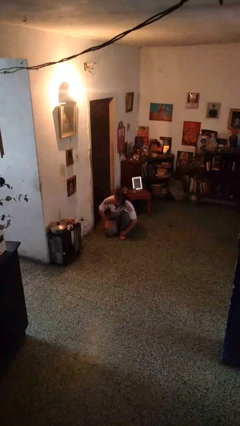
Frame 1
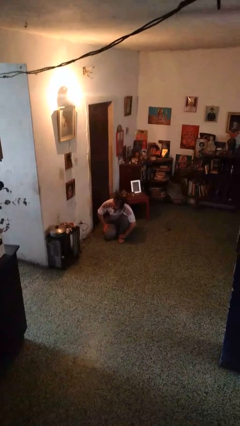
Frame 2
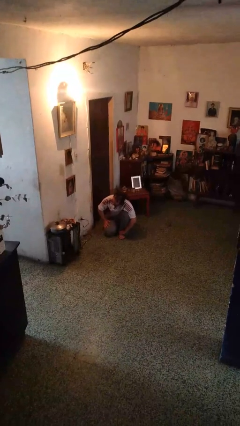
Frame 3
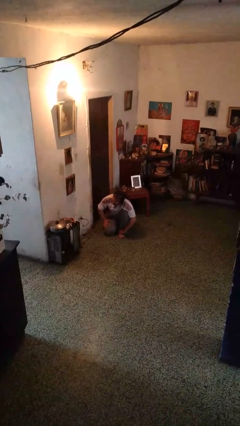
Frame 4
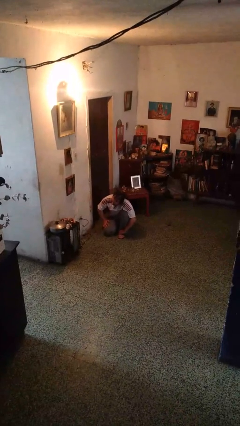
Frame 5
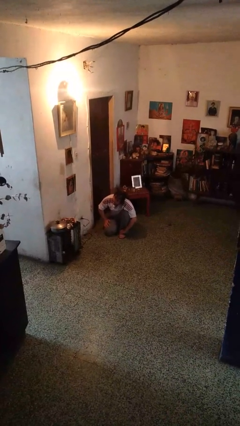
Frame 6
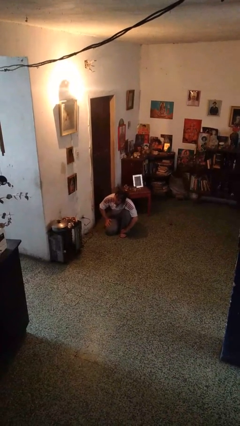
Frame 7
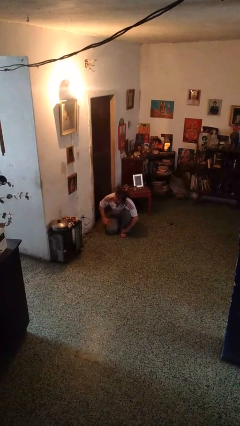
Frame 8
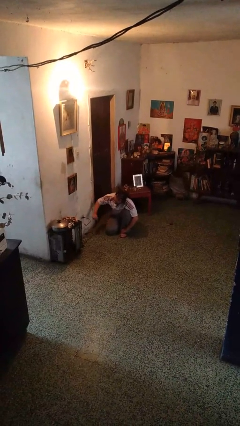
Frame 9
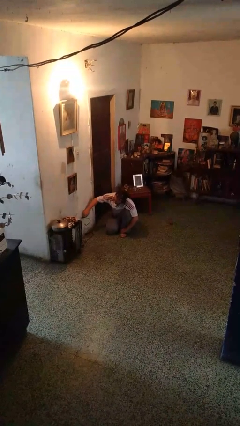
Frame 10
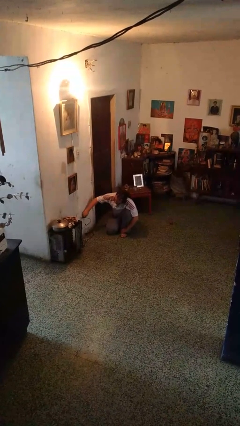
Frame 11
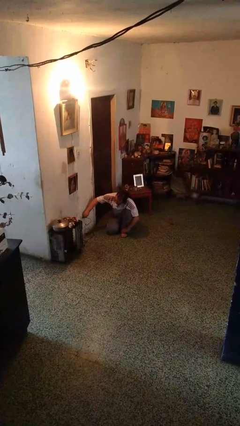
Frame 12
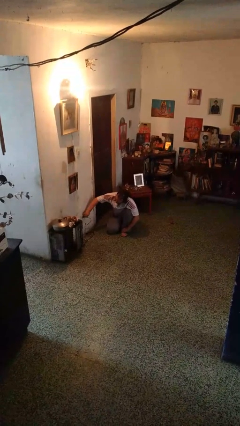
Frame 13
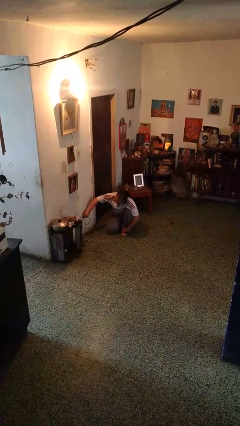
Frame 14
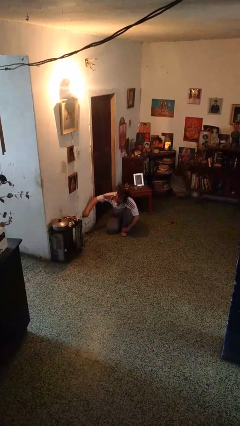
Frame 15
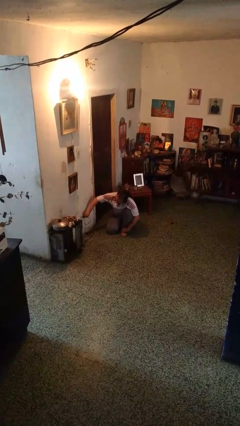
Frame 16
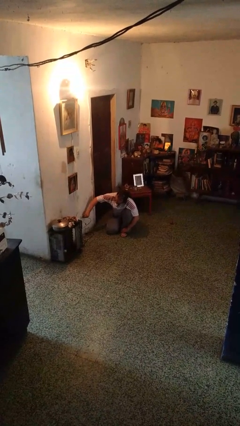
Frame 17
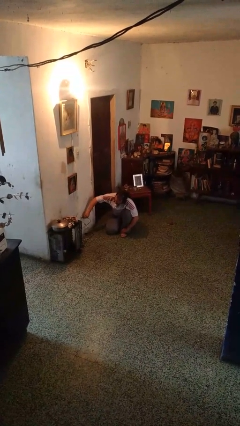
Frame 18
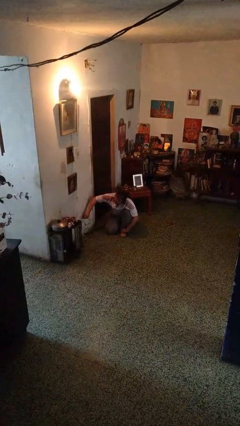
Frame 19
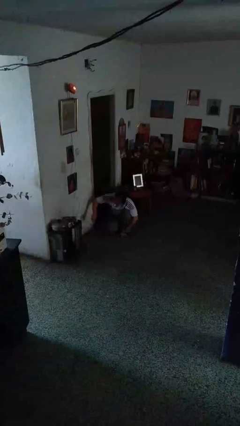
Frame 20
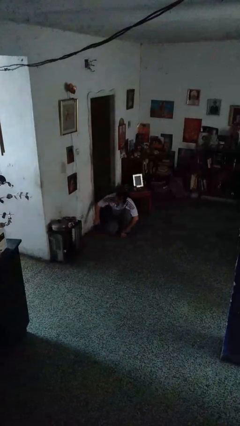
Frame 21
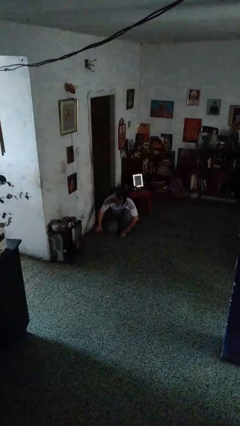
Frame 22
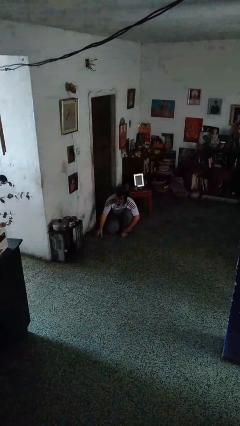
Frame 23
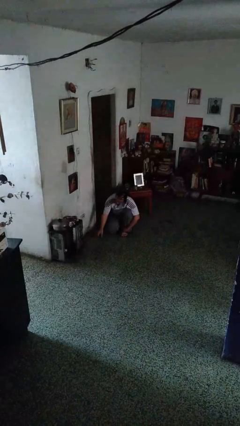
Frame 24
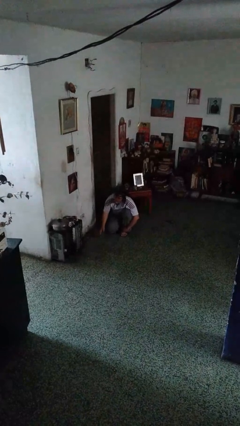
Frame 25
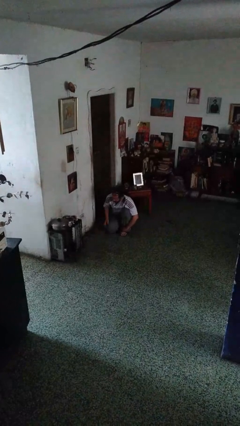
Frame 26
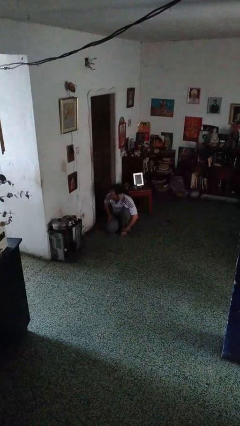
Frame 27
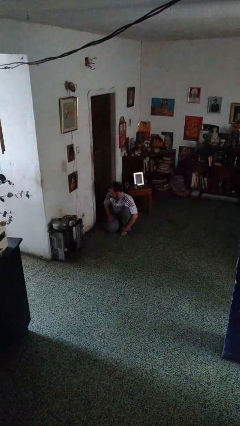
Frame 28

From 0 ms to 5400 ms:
person unplugs from electrical socket

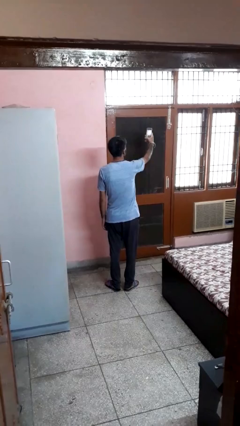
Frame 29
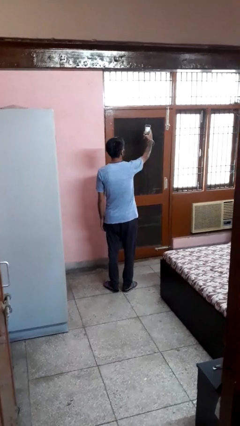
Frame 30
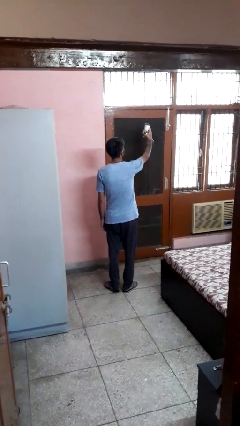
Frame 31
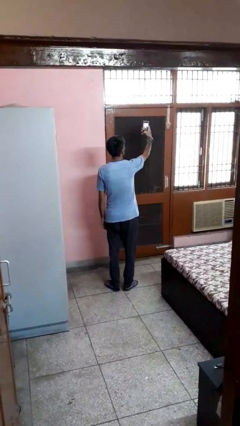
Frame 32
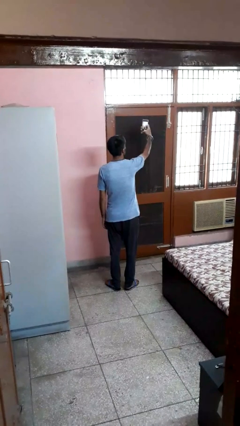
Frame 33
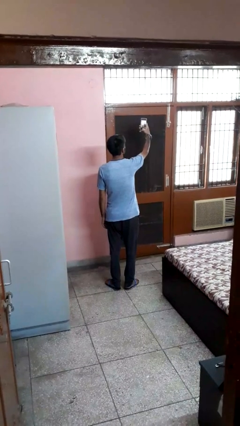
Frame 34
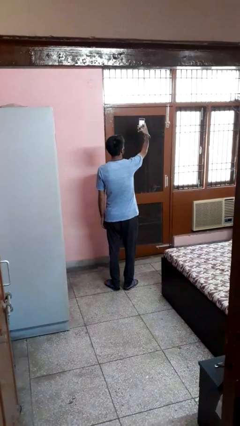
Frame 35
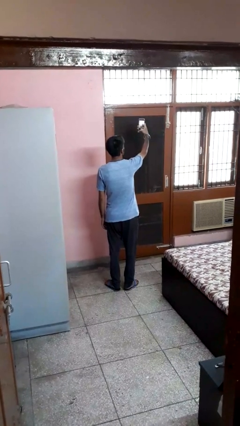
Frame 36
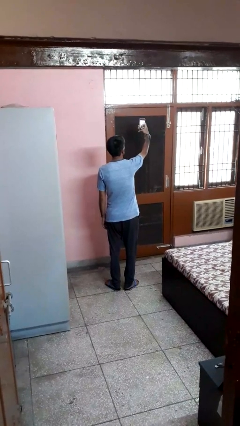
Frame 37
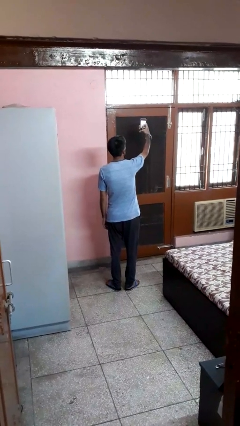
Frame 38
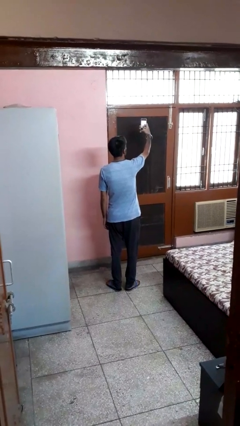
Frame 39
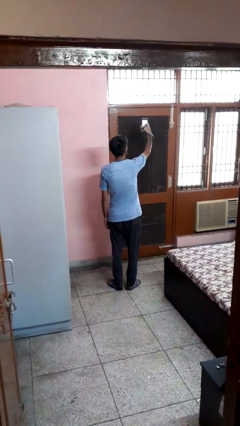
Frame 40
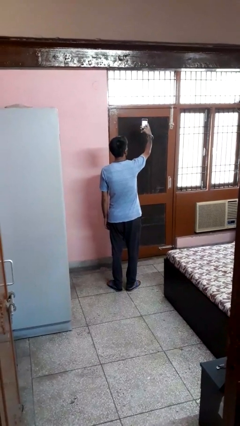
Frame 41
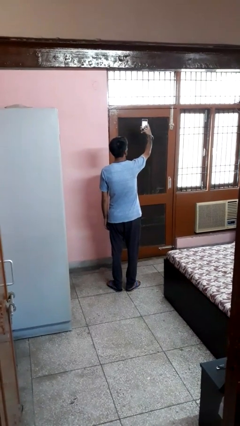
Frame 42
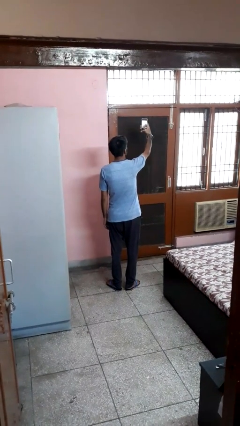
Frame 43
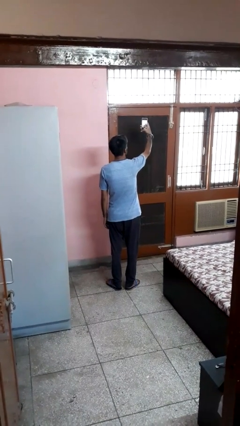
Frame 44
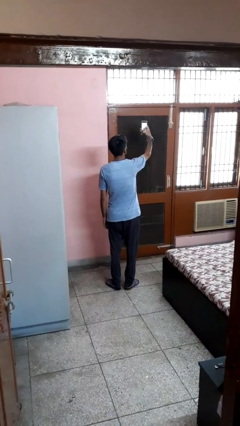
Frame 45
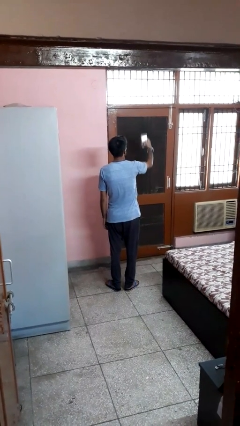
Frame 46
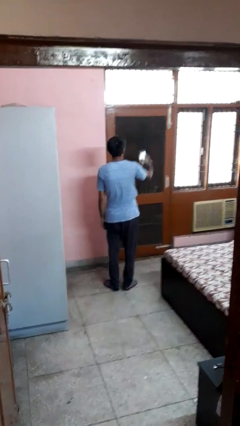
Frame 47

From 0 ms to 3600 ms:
person takes selfie

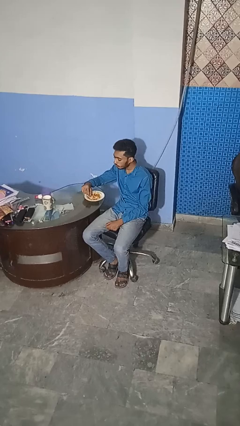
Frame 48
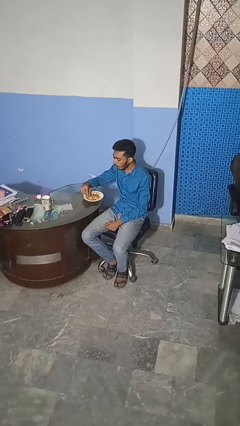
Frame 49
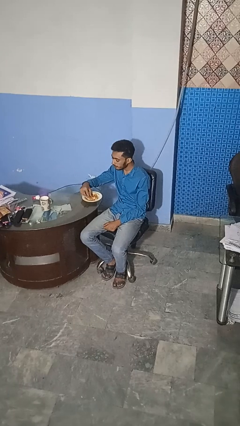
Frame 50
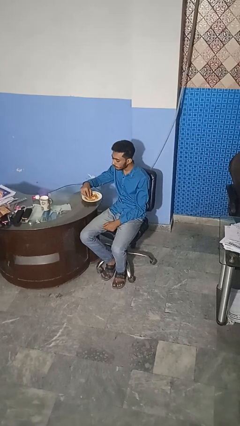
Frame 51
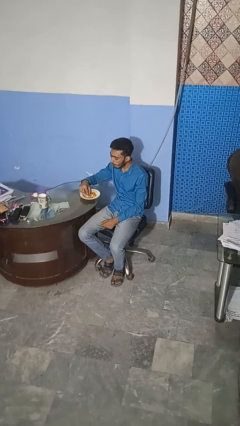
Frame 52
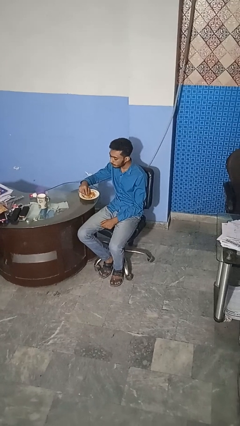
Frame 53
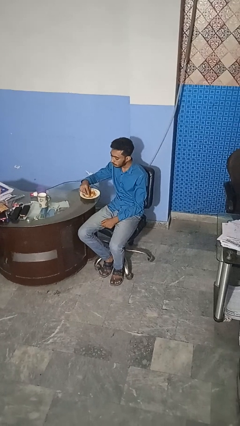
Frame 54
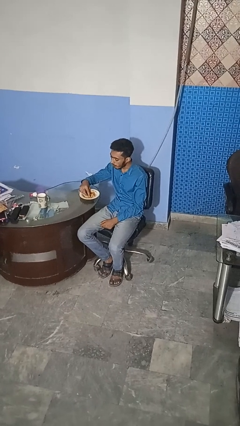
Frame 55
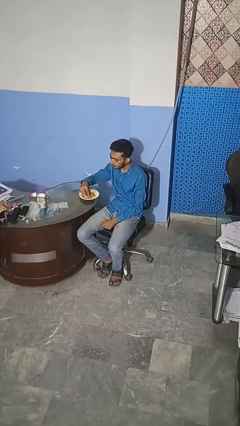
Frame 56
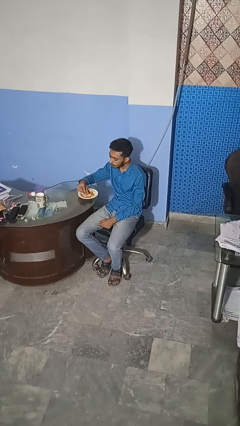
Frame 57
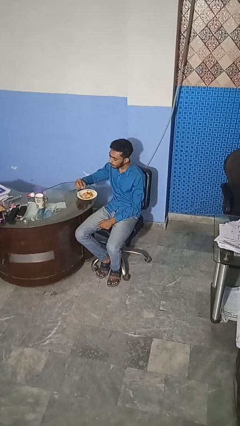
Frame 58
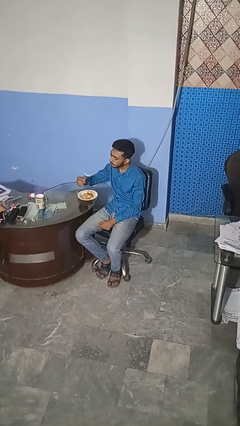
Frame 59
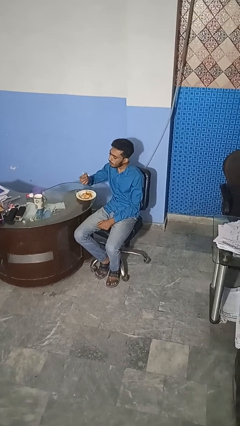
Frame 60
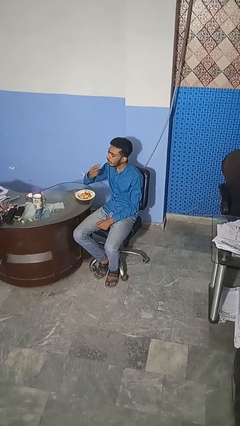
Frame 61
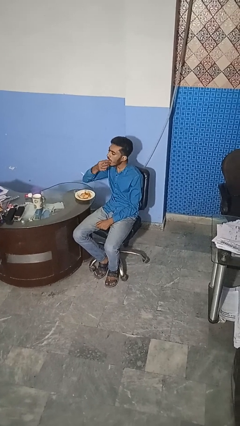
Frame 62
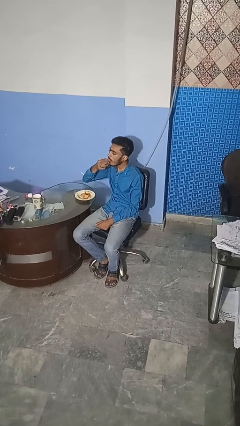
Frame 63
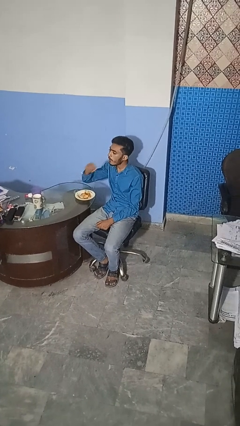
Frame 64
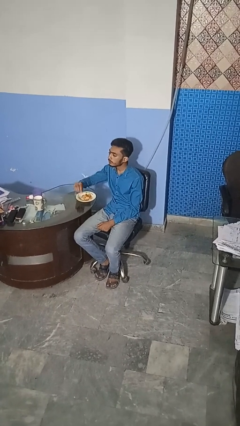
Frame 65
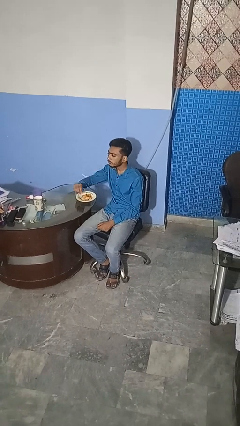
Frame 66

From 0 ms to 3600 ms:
person eats with hands

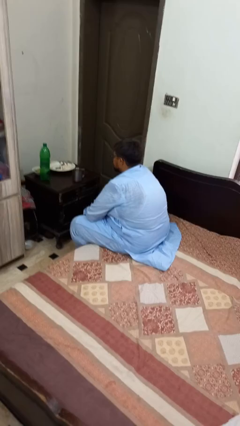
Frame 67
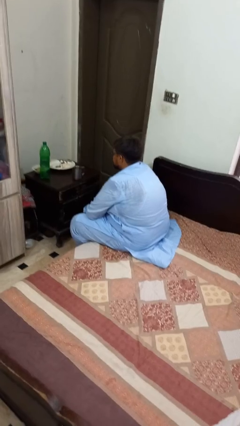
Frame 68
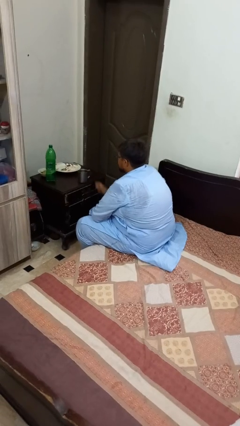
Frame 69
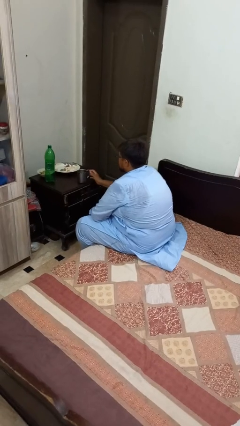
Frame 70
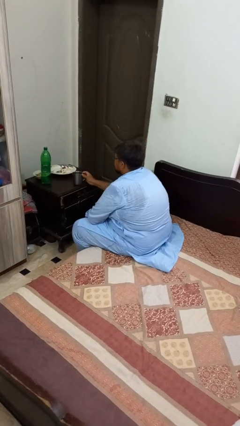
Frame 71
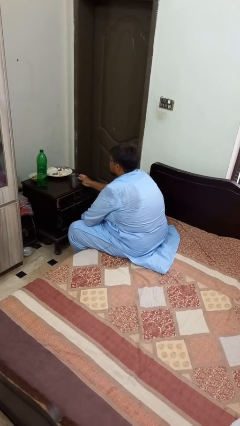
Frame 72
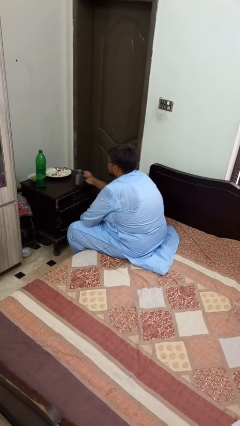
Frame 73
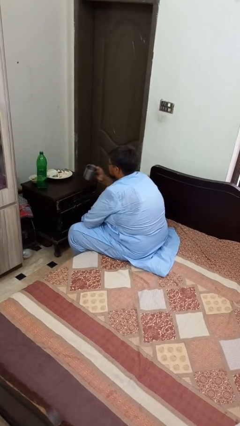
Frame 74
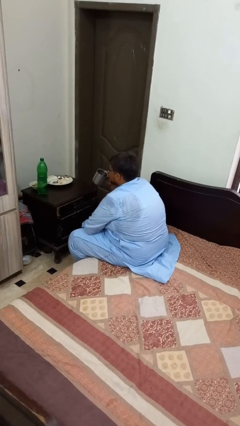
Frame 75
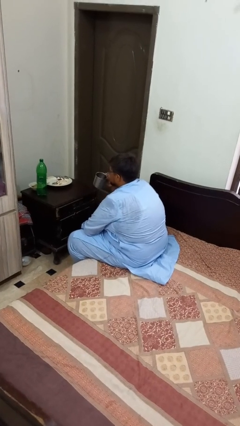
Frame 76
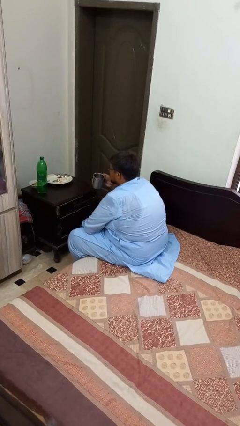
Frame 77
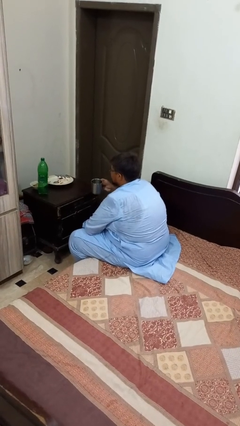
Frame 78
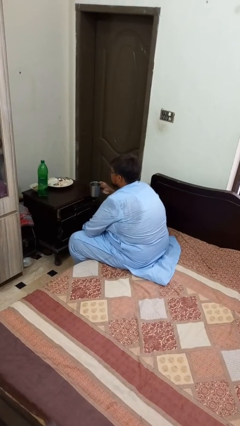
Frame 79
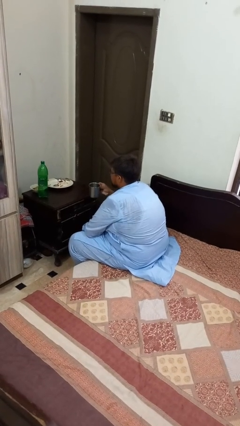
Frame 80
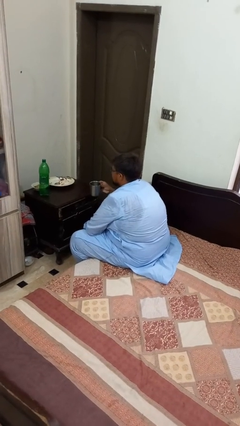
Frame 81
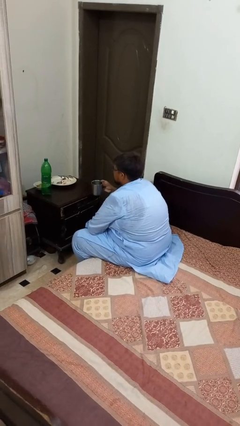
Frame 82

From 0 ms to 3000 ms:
person picks up object from table

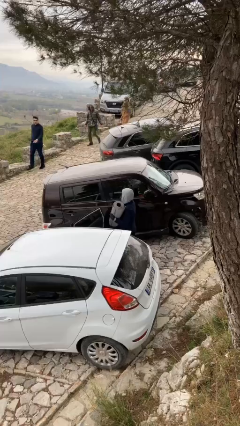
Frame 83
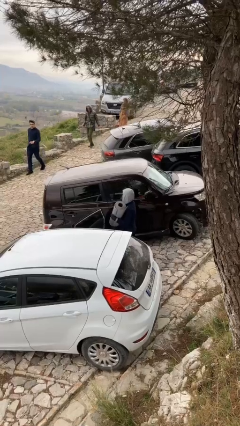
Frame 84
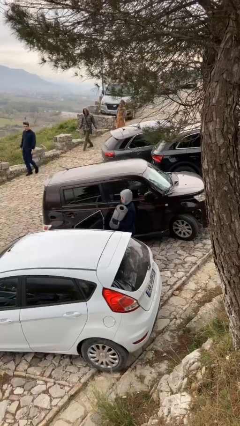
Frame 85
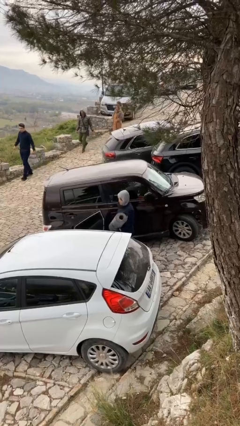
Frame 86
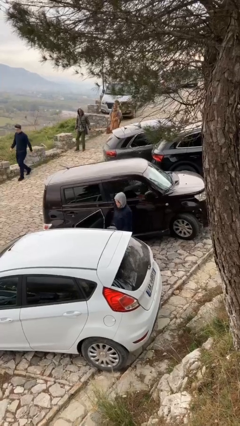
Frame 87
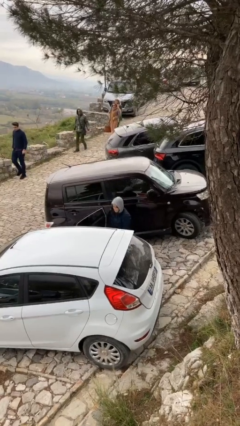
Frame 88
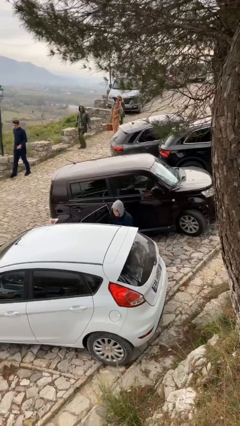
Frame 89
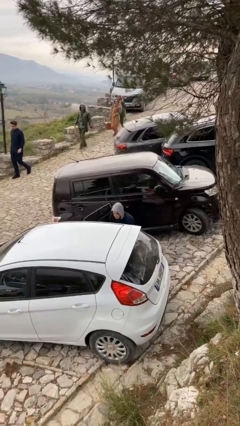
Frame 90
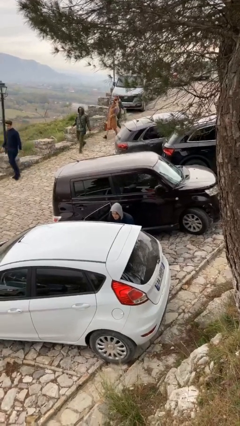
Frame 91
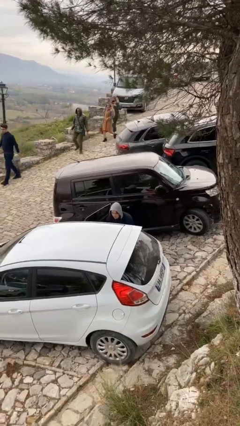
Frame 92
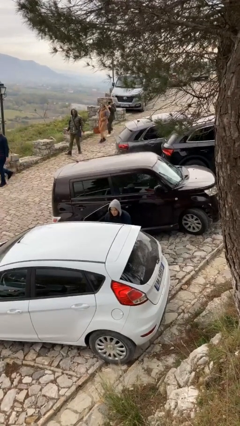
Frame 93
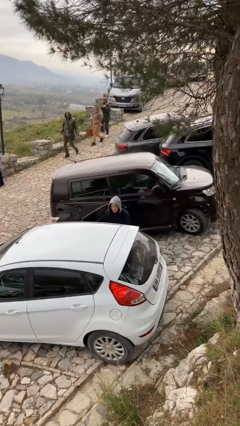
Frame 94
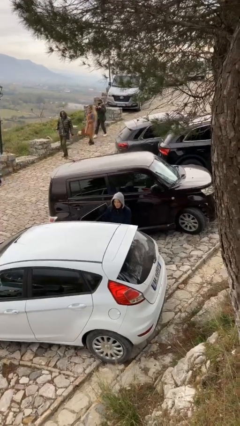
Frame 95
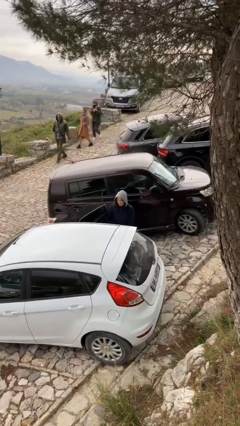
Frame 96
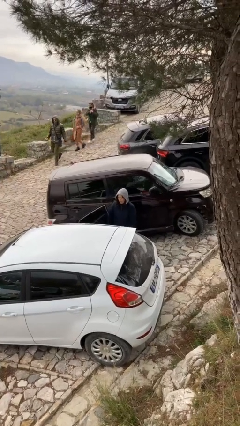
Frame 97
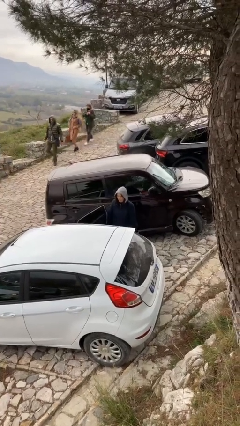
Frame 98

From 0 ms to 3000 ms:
person loads car
